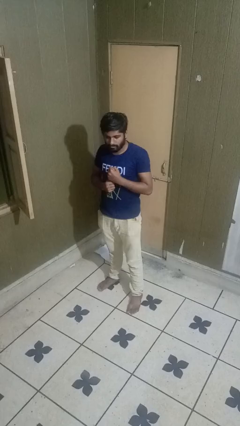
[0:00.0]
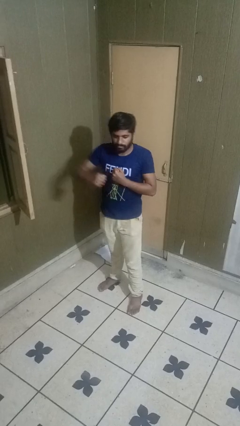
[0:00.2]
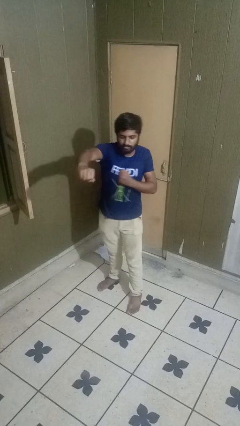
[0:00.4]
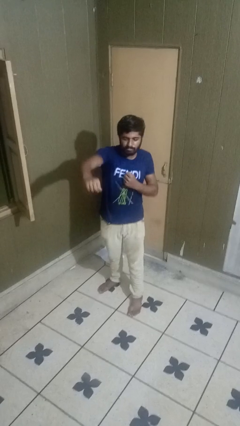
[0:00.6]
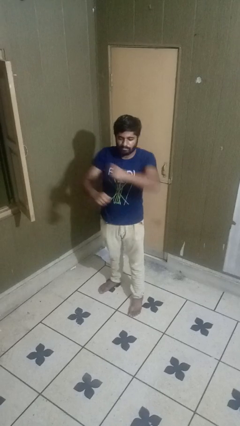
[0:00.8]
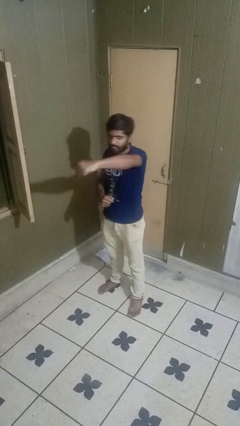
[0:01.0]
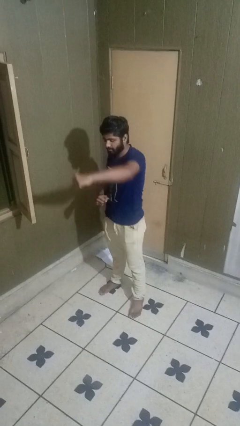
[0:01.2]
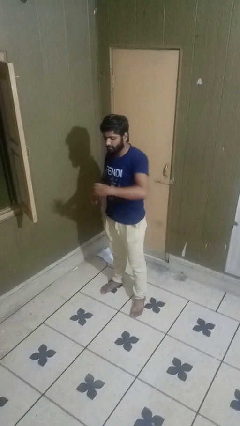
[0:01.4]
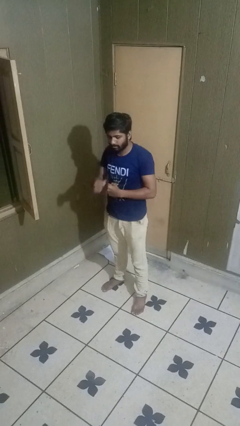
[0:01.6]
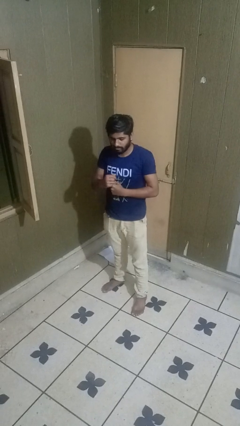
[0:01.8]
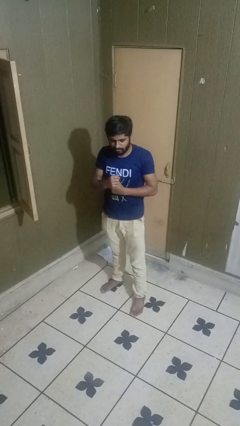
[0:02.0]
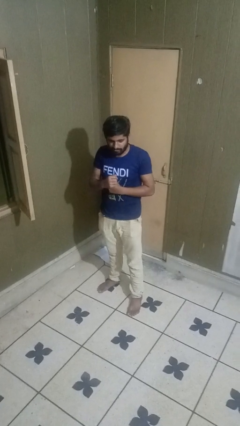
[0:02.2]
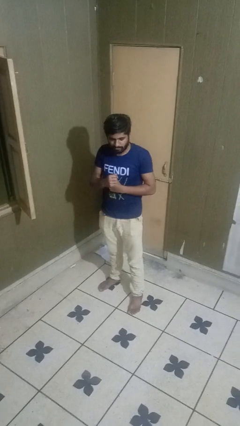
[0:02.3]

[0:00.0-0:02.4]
person punches

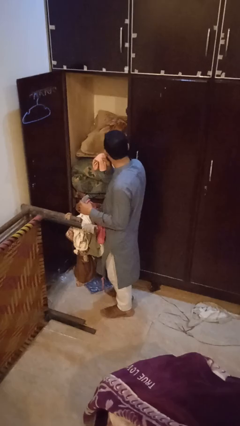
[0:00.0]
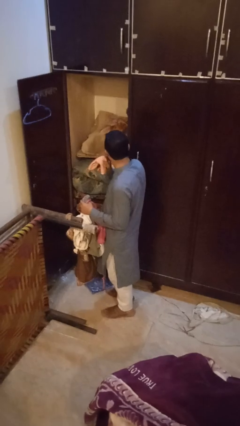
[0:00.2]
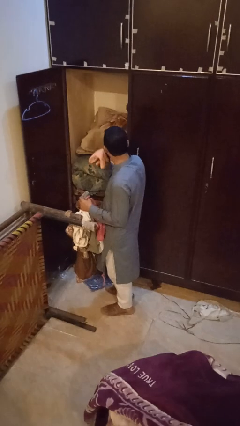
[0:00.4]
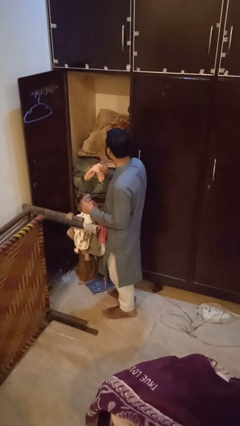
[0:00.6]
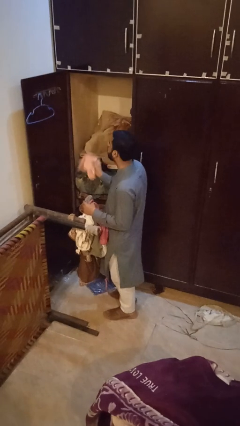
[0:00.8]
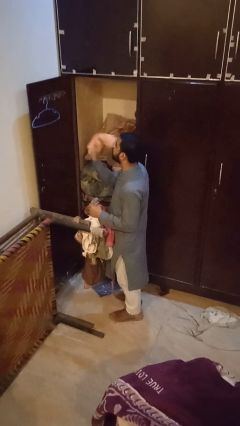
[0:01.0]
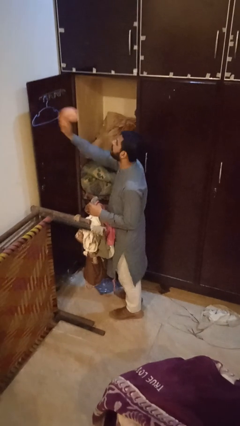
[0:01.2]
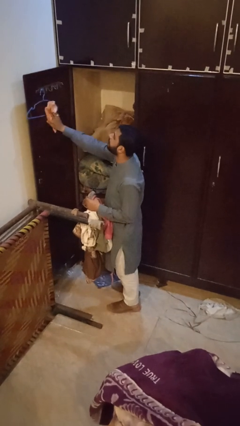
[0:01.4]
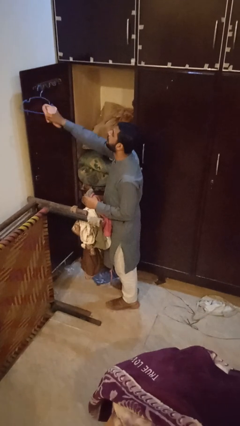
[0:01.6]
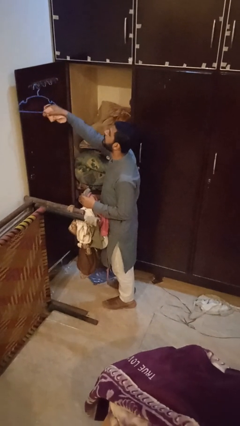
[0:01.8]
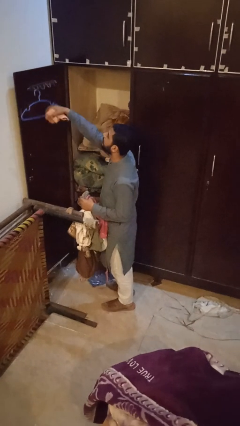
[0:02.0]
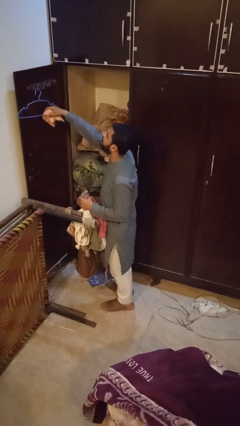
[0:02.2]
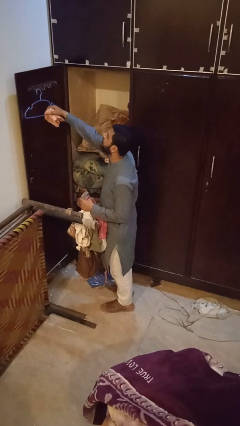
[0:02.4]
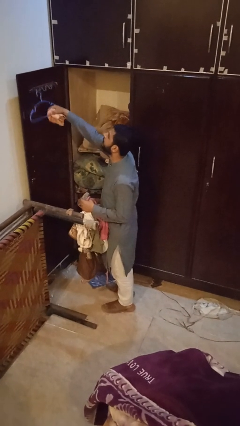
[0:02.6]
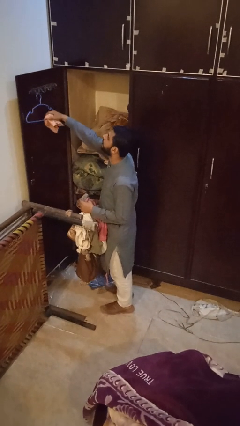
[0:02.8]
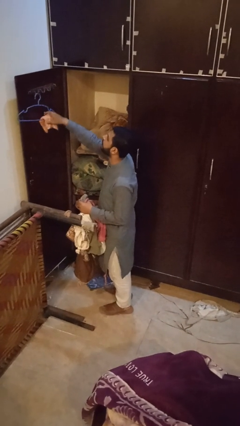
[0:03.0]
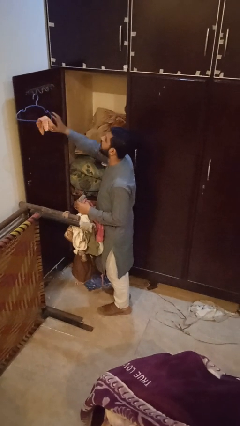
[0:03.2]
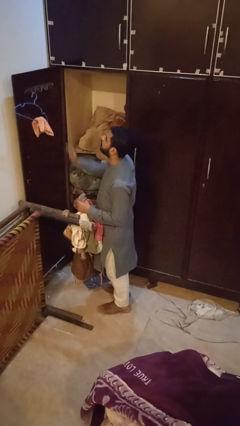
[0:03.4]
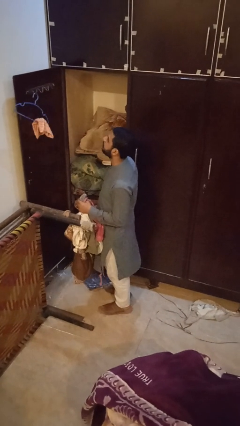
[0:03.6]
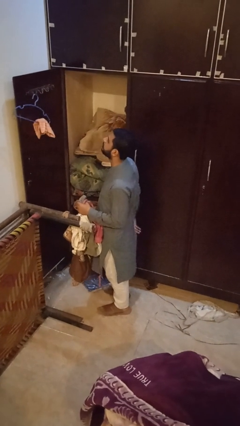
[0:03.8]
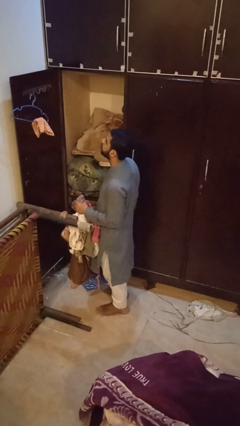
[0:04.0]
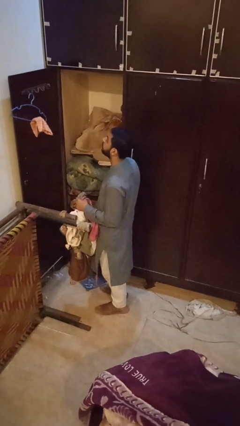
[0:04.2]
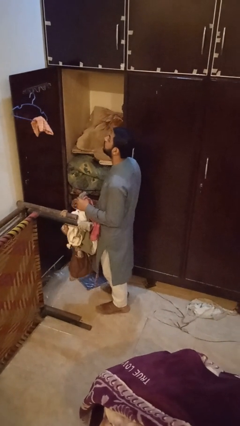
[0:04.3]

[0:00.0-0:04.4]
person puts clothes into closet

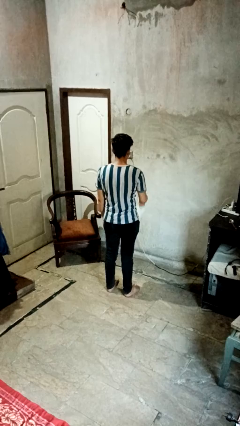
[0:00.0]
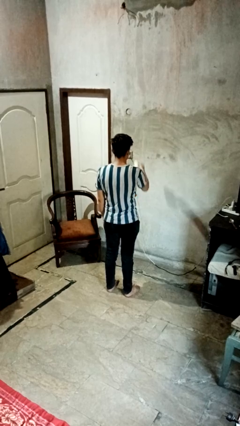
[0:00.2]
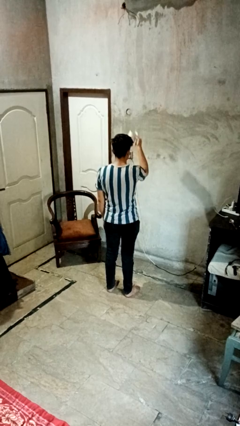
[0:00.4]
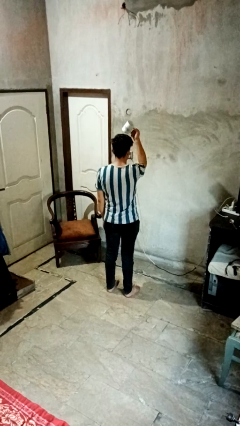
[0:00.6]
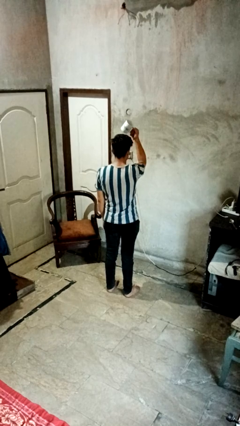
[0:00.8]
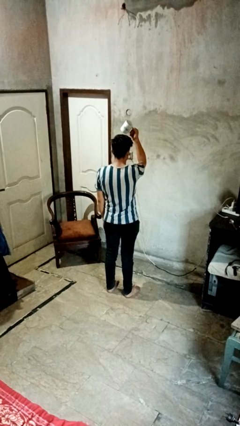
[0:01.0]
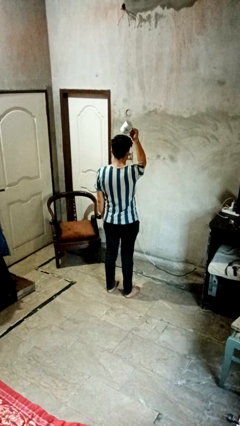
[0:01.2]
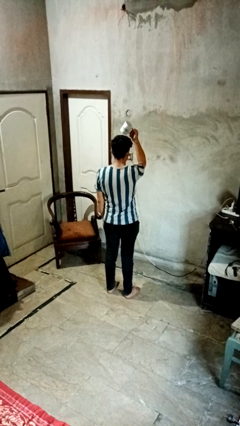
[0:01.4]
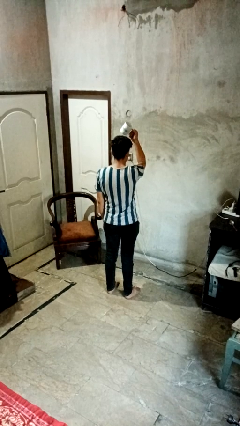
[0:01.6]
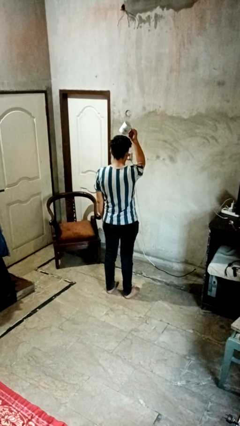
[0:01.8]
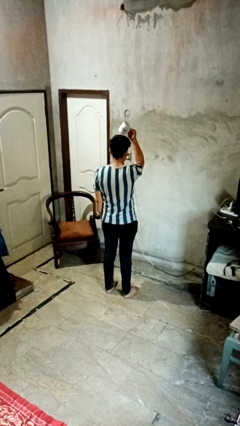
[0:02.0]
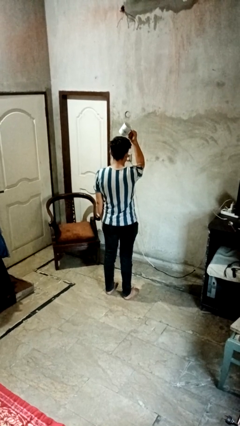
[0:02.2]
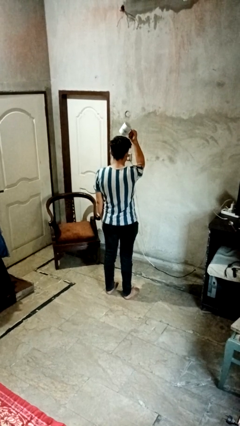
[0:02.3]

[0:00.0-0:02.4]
person holds object above head

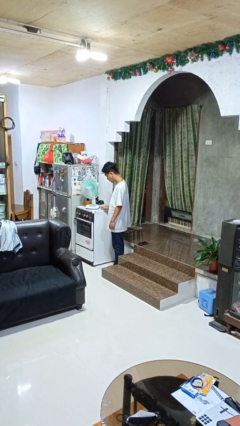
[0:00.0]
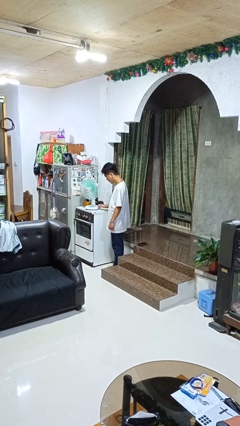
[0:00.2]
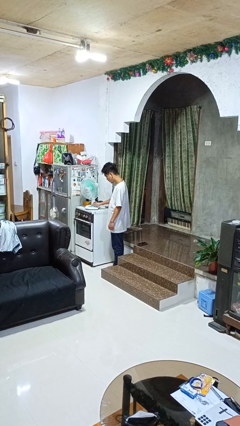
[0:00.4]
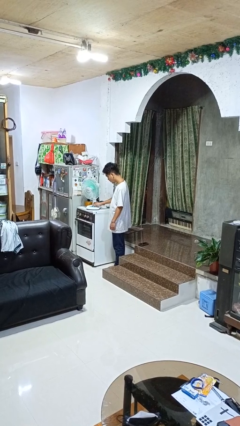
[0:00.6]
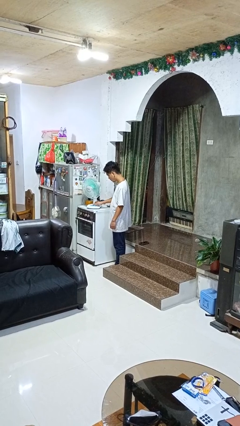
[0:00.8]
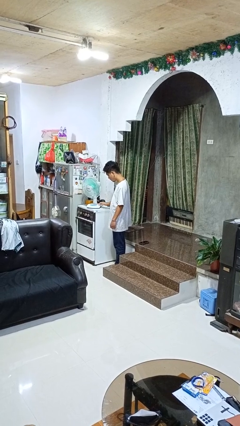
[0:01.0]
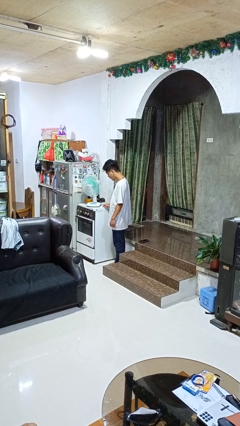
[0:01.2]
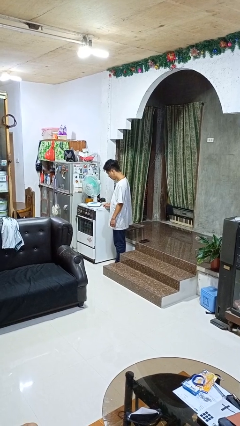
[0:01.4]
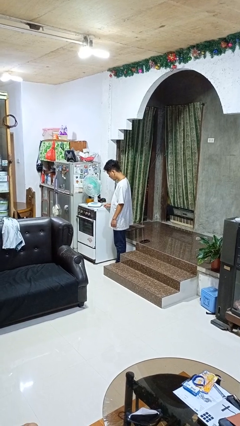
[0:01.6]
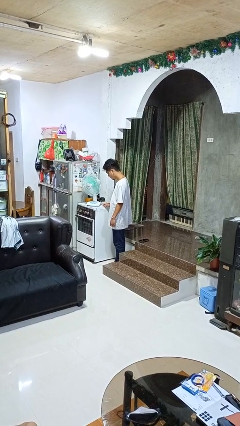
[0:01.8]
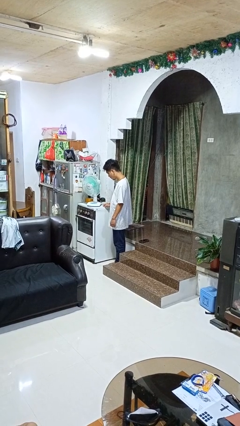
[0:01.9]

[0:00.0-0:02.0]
person turns on fan

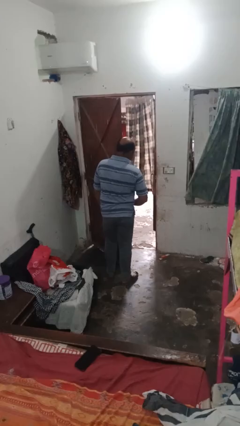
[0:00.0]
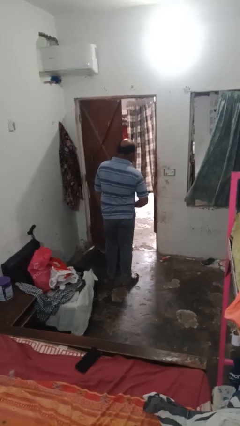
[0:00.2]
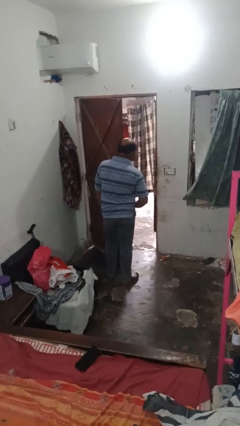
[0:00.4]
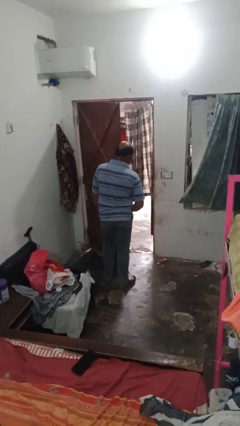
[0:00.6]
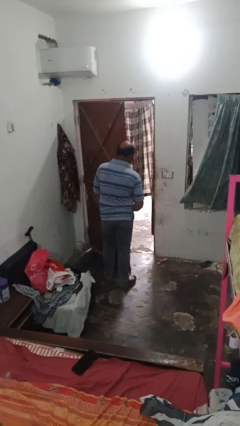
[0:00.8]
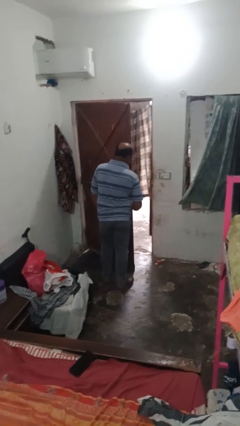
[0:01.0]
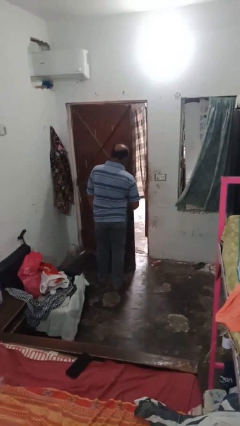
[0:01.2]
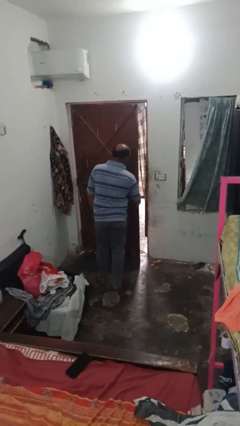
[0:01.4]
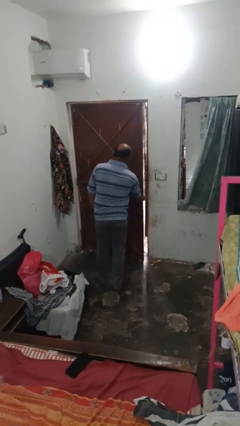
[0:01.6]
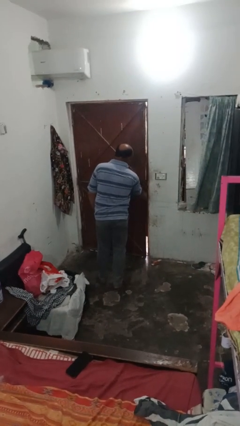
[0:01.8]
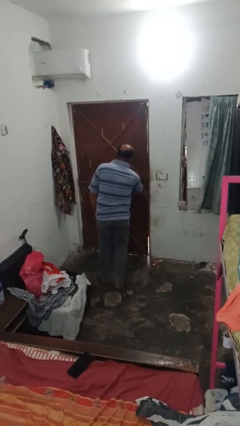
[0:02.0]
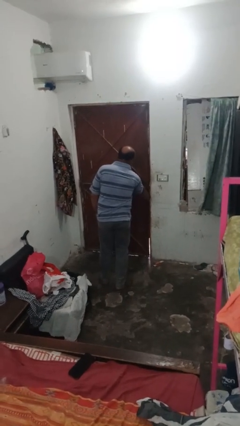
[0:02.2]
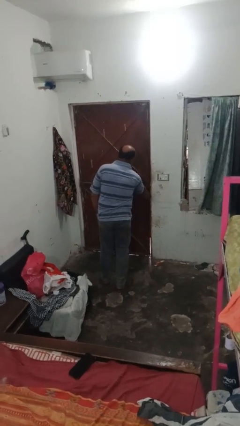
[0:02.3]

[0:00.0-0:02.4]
person closes closet door
